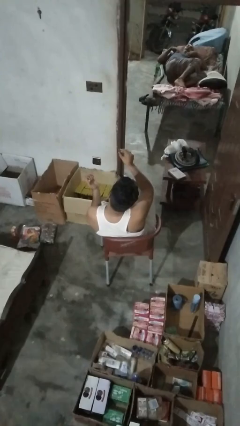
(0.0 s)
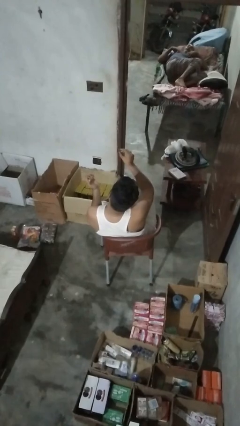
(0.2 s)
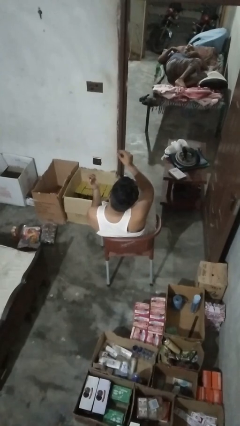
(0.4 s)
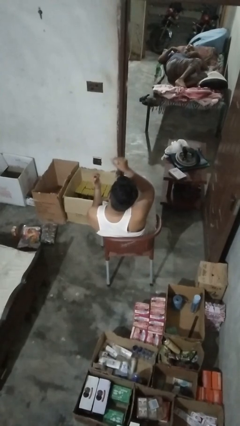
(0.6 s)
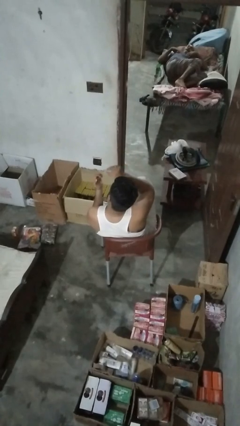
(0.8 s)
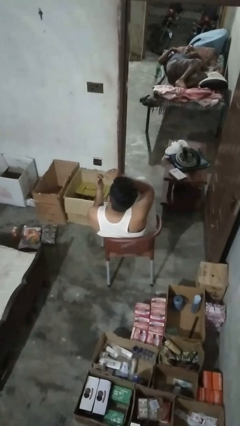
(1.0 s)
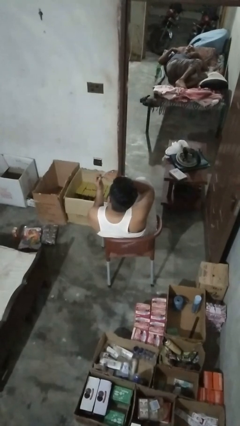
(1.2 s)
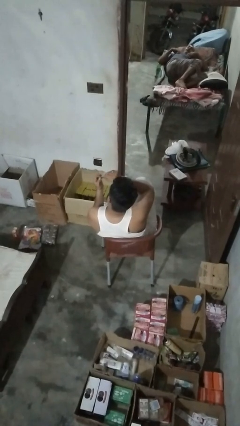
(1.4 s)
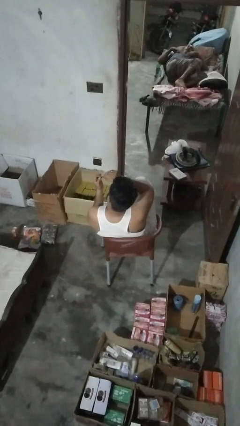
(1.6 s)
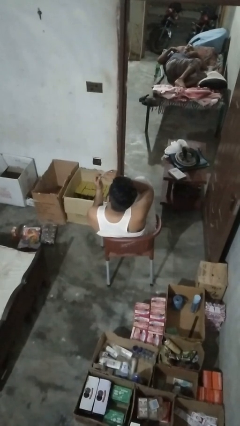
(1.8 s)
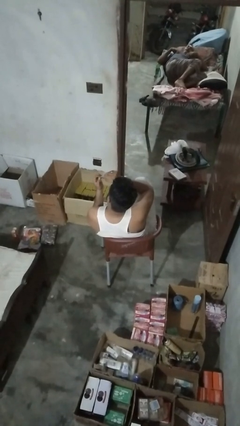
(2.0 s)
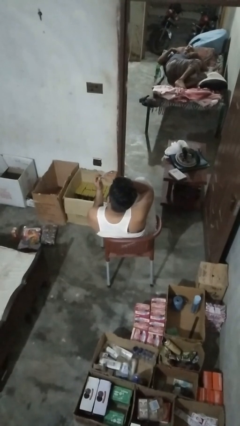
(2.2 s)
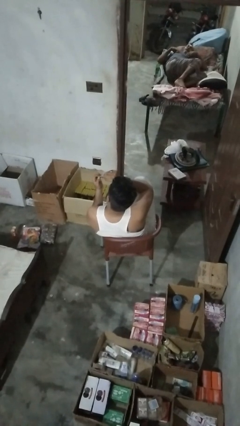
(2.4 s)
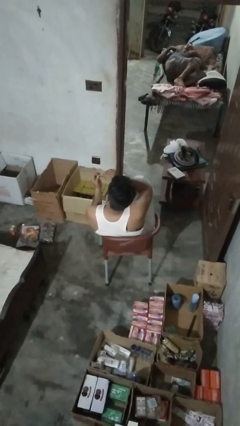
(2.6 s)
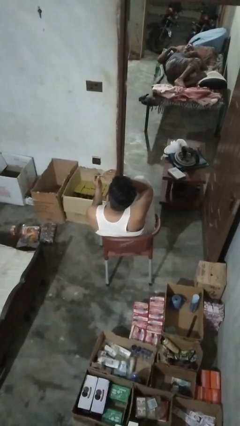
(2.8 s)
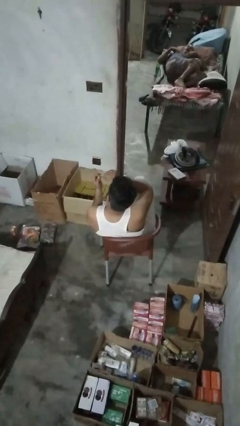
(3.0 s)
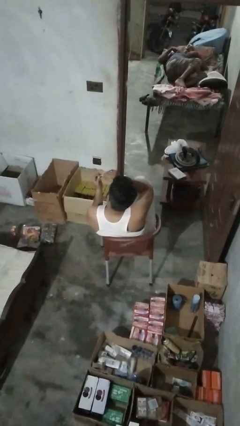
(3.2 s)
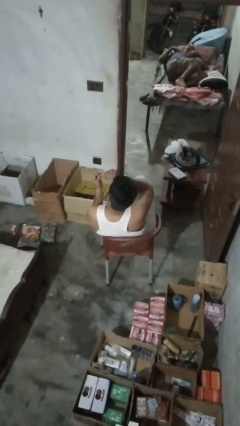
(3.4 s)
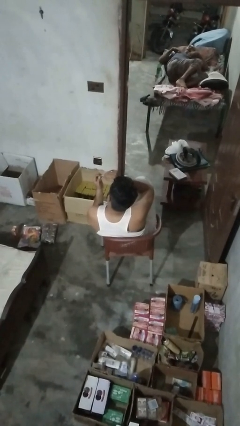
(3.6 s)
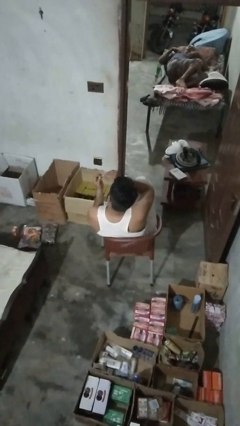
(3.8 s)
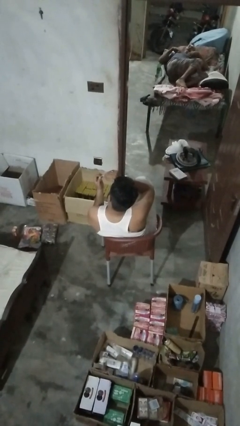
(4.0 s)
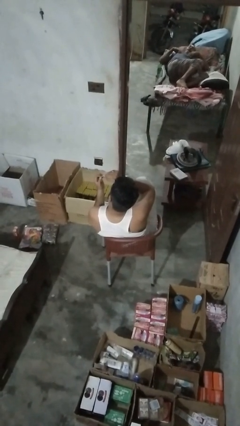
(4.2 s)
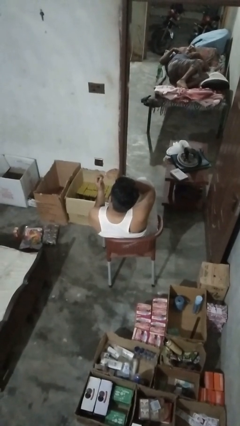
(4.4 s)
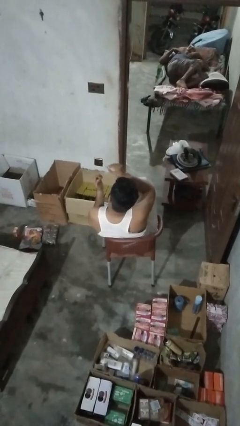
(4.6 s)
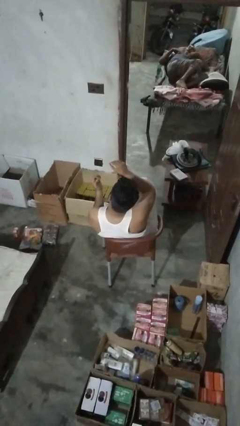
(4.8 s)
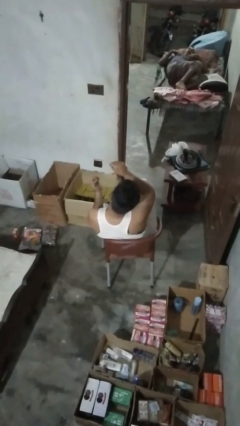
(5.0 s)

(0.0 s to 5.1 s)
person clips fingernails

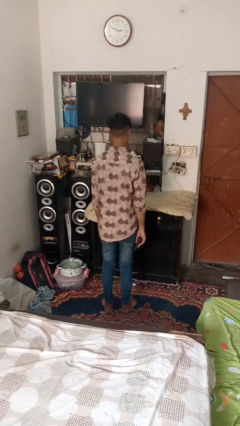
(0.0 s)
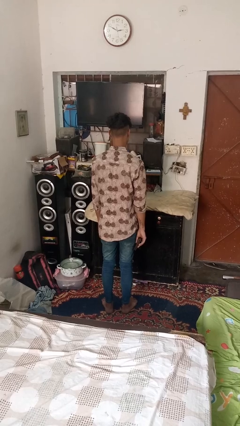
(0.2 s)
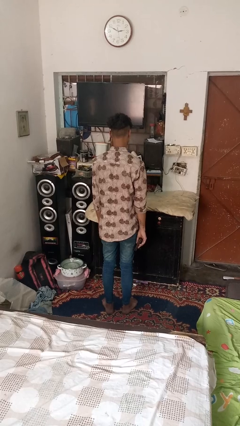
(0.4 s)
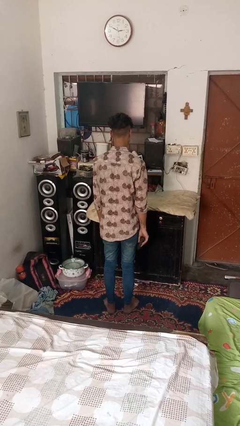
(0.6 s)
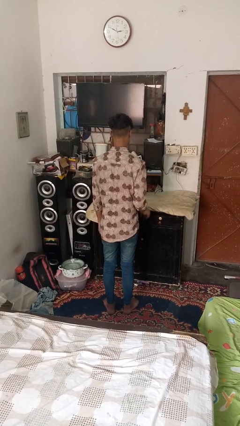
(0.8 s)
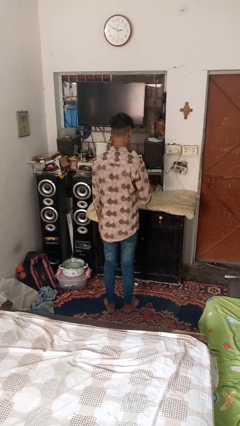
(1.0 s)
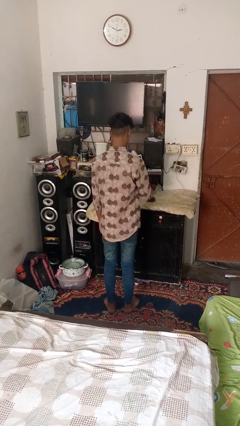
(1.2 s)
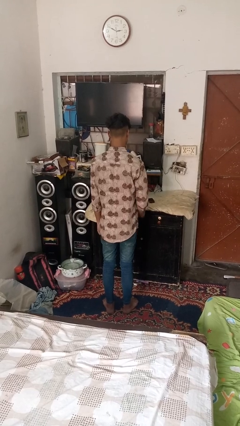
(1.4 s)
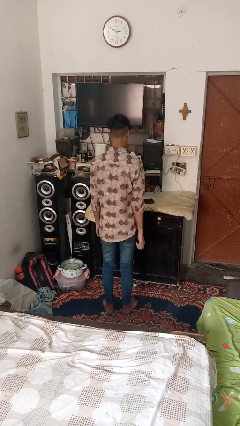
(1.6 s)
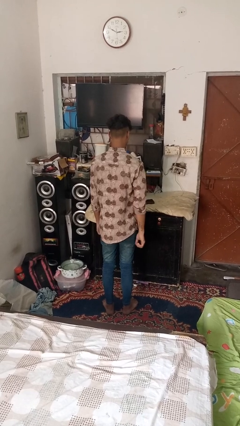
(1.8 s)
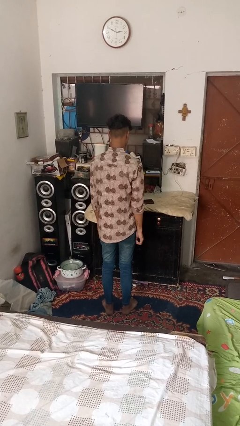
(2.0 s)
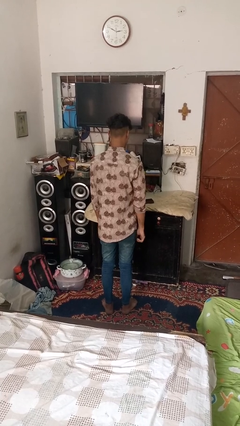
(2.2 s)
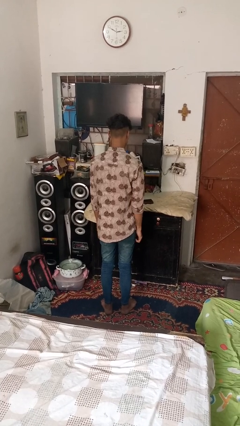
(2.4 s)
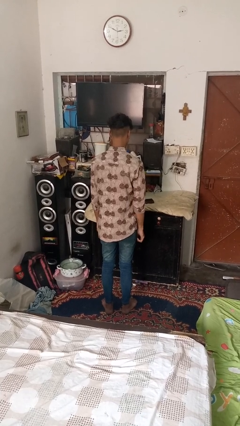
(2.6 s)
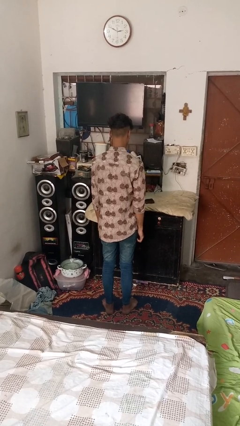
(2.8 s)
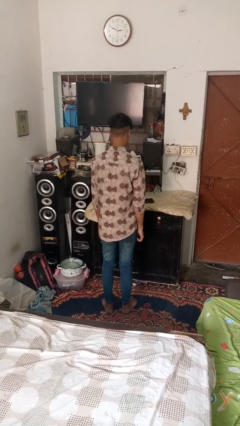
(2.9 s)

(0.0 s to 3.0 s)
person throws object on table

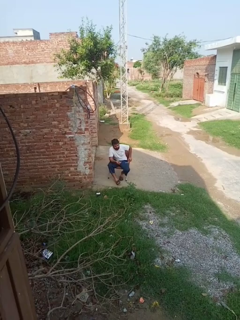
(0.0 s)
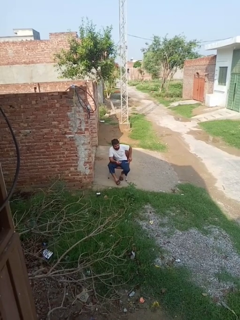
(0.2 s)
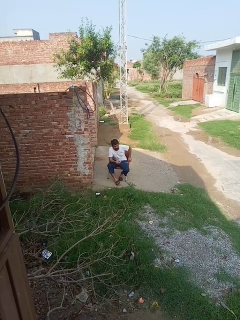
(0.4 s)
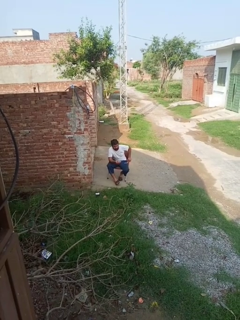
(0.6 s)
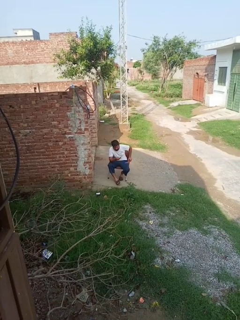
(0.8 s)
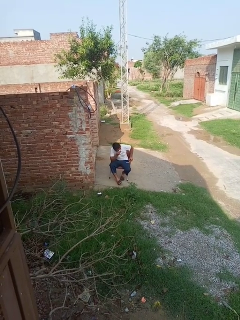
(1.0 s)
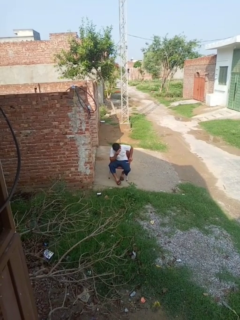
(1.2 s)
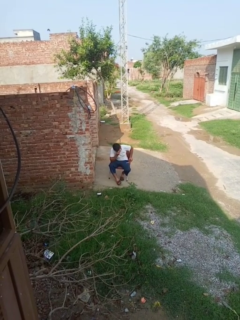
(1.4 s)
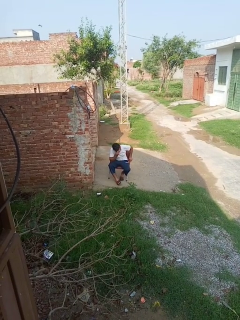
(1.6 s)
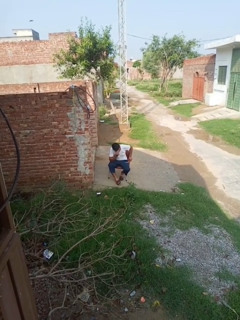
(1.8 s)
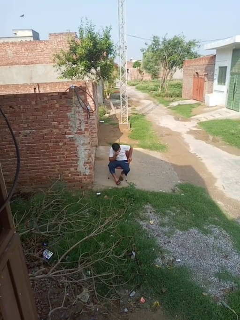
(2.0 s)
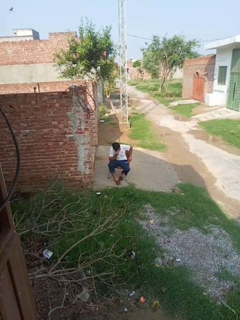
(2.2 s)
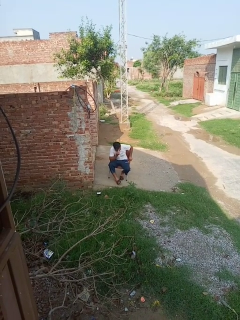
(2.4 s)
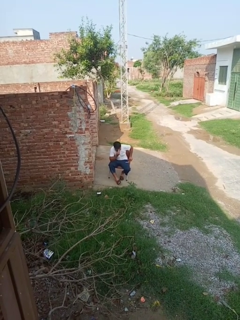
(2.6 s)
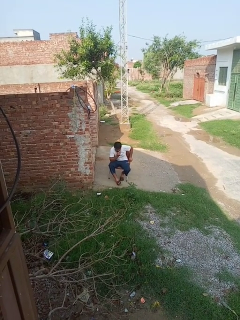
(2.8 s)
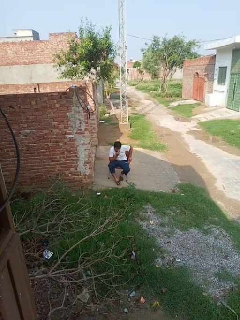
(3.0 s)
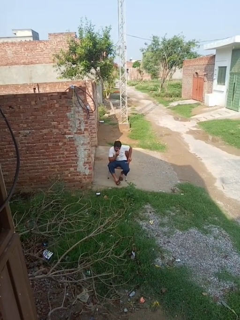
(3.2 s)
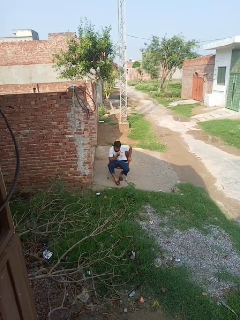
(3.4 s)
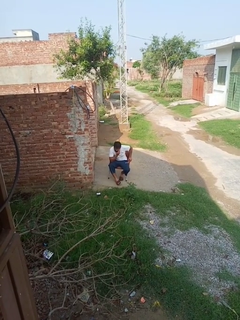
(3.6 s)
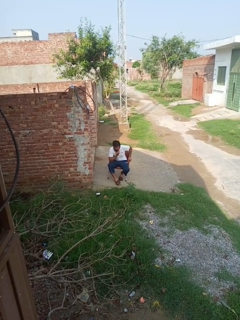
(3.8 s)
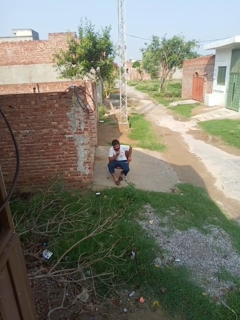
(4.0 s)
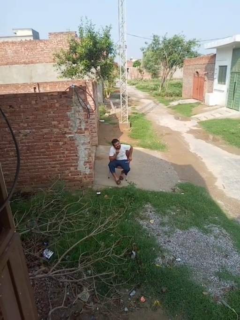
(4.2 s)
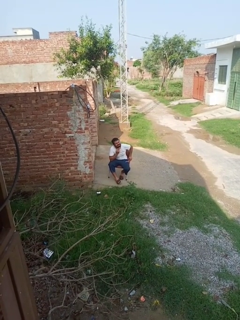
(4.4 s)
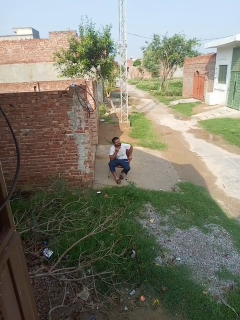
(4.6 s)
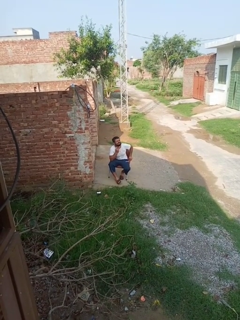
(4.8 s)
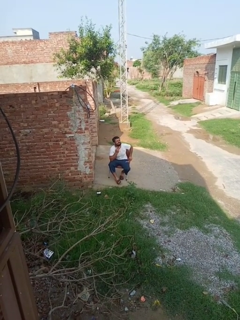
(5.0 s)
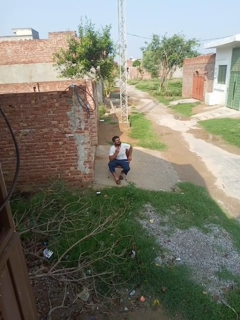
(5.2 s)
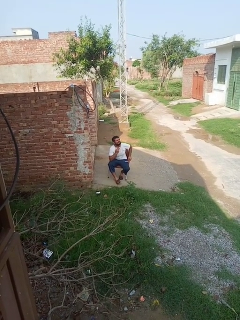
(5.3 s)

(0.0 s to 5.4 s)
person wipes mouth with napkin

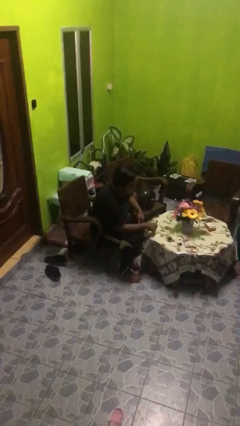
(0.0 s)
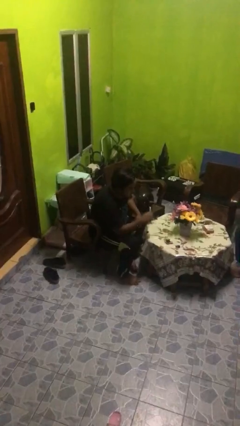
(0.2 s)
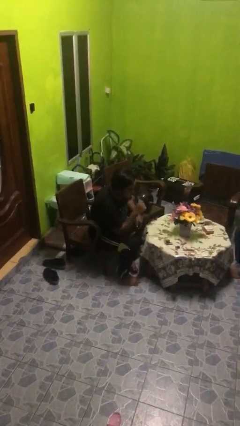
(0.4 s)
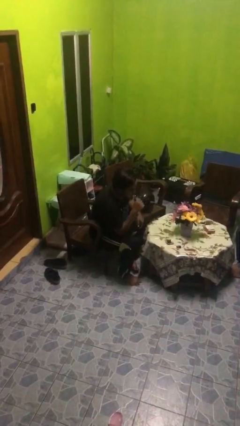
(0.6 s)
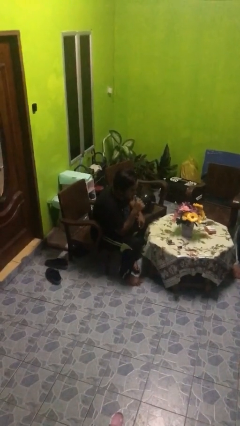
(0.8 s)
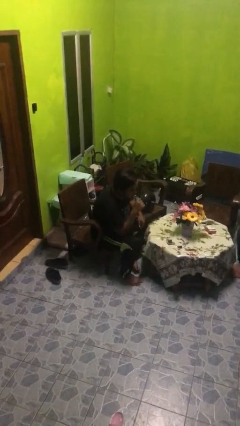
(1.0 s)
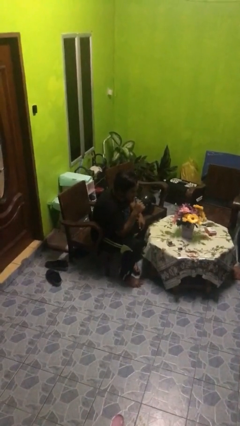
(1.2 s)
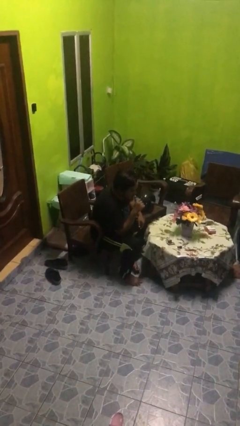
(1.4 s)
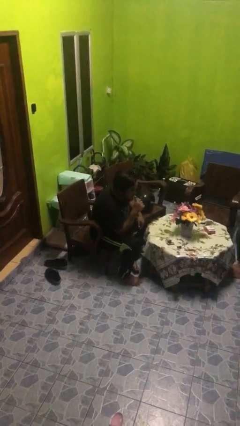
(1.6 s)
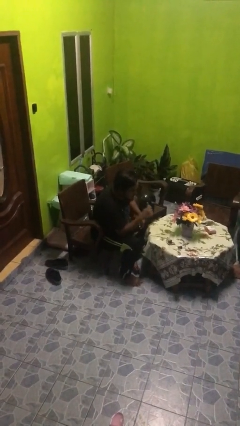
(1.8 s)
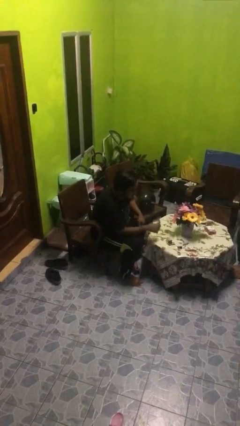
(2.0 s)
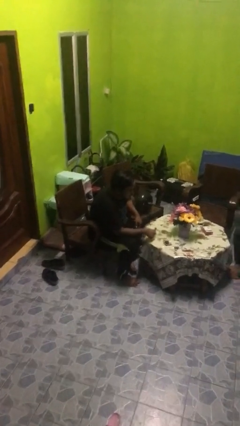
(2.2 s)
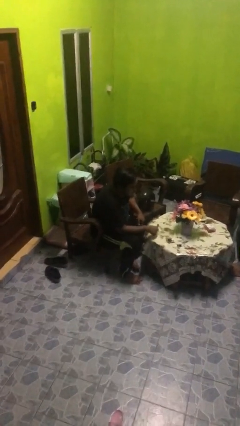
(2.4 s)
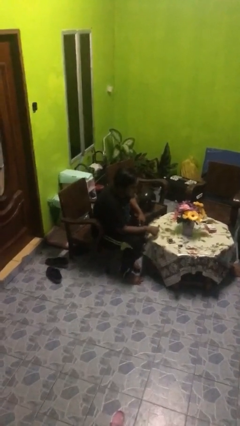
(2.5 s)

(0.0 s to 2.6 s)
person vapes

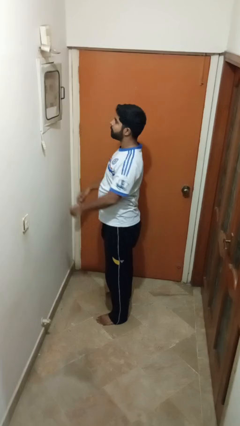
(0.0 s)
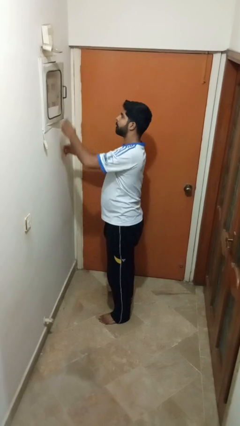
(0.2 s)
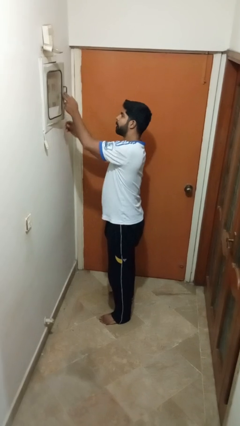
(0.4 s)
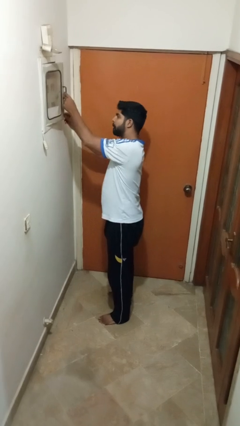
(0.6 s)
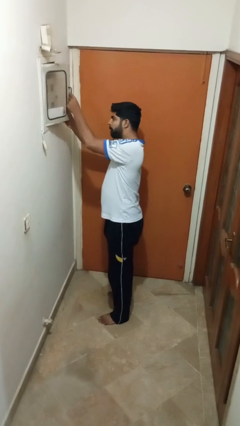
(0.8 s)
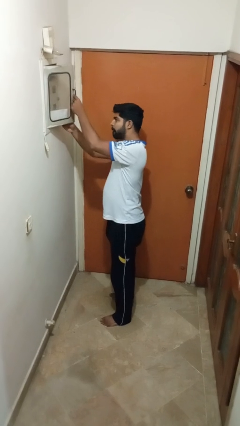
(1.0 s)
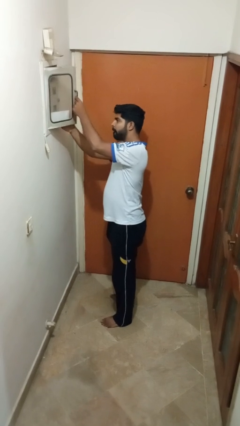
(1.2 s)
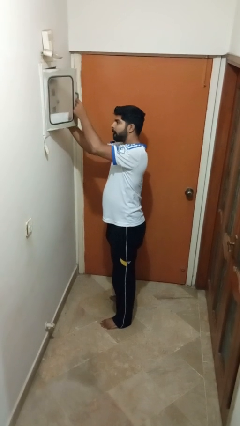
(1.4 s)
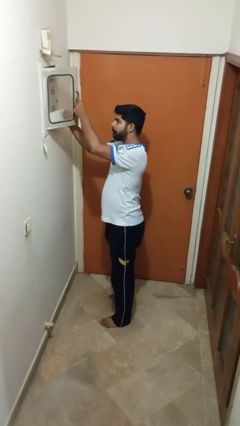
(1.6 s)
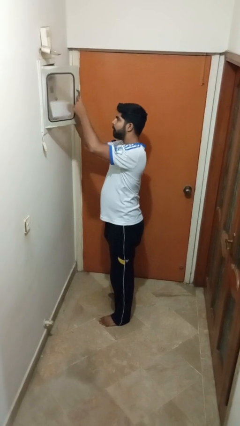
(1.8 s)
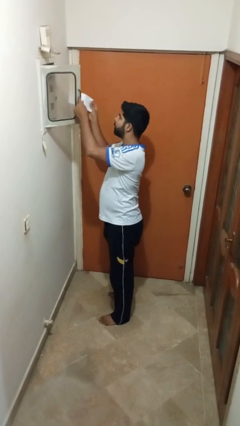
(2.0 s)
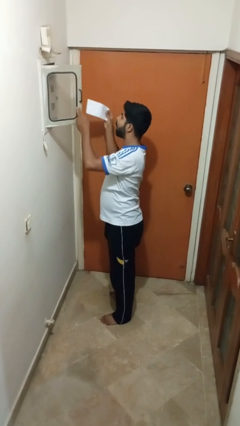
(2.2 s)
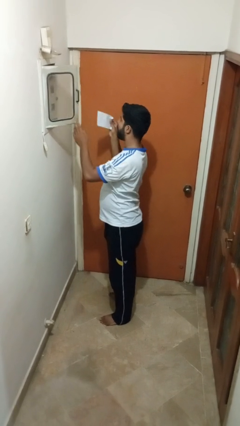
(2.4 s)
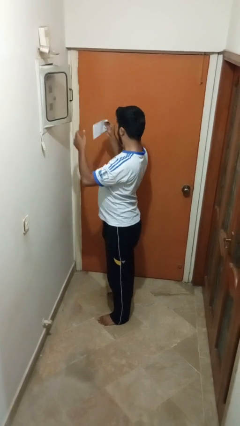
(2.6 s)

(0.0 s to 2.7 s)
person takes letters from mailbox

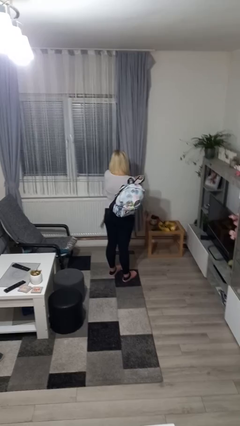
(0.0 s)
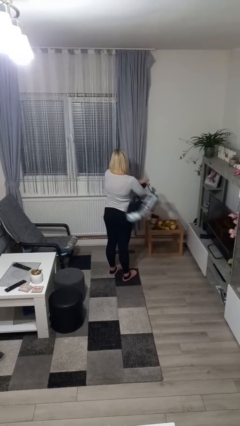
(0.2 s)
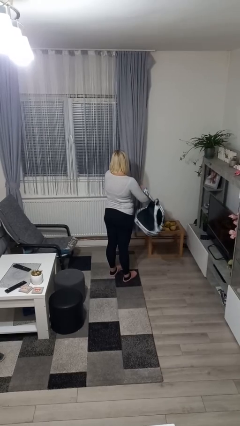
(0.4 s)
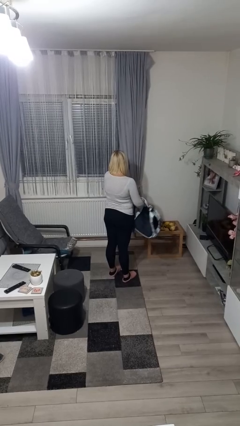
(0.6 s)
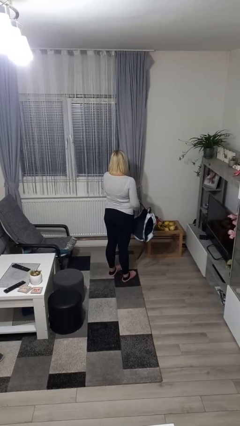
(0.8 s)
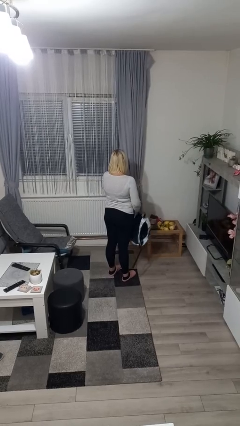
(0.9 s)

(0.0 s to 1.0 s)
person takes off backpack
